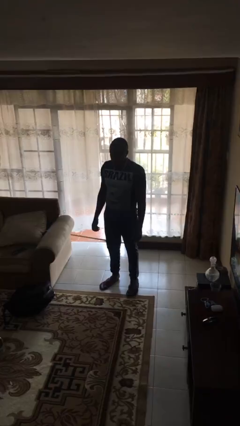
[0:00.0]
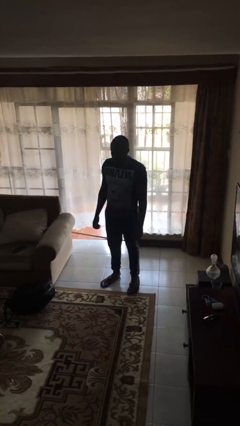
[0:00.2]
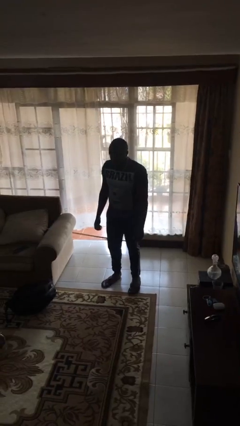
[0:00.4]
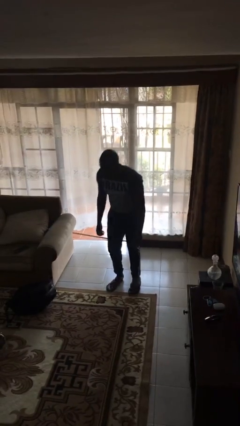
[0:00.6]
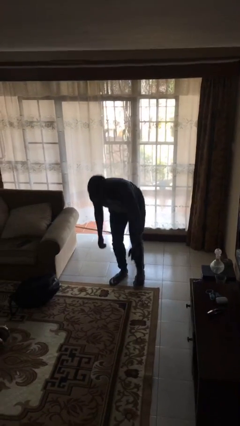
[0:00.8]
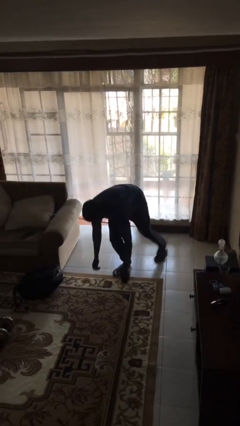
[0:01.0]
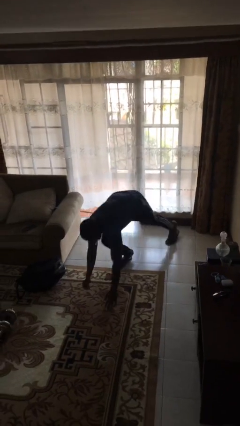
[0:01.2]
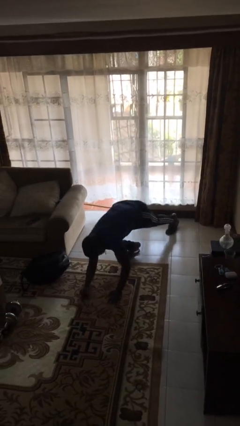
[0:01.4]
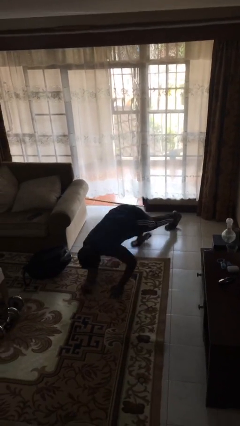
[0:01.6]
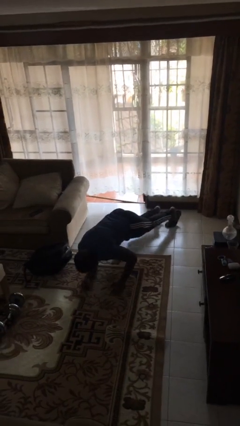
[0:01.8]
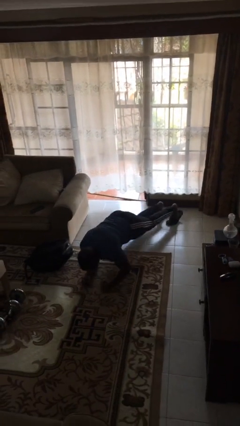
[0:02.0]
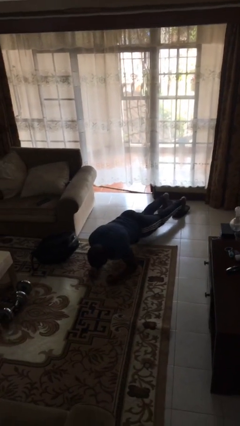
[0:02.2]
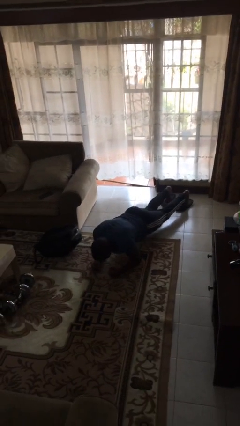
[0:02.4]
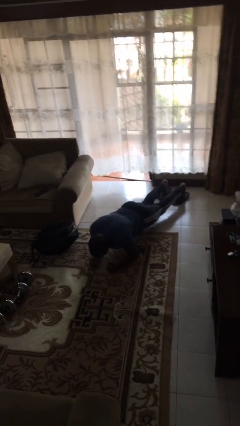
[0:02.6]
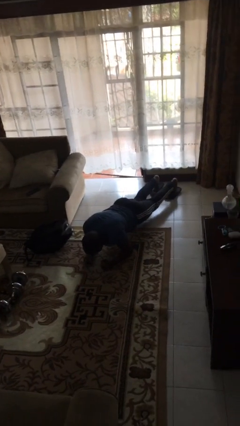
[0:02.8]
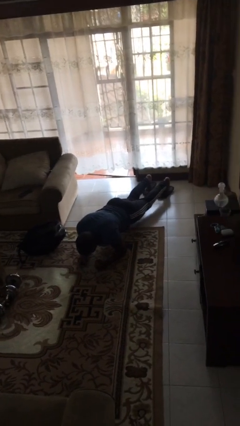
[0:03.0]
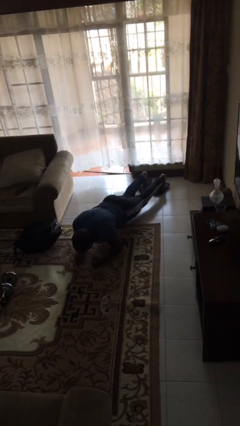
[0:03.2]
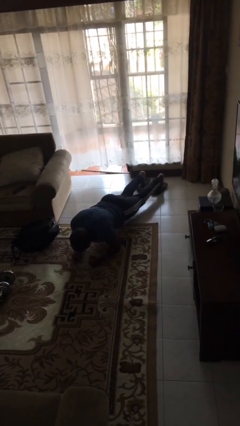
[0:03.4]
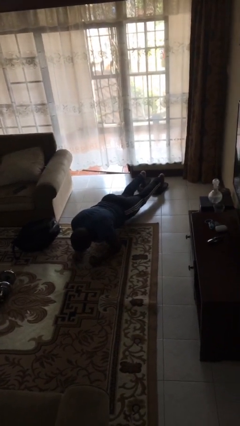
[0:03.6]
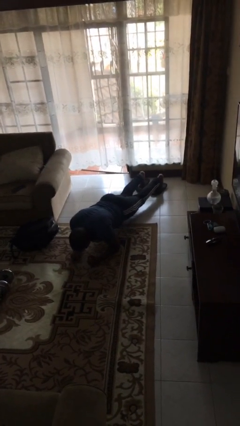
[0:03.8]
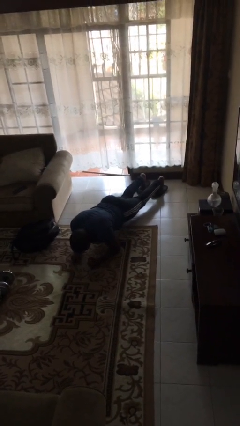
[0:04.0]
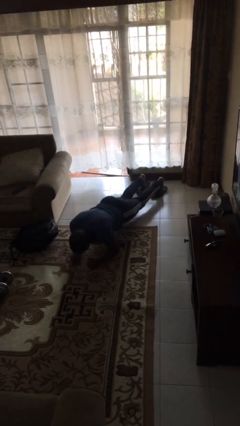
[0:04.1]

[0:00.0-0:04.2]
person exercises with plank

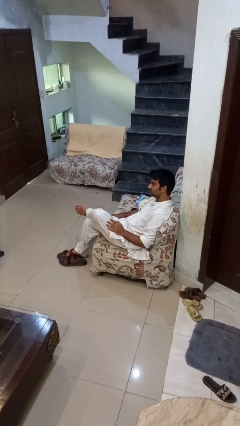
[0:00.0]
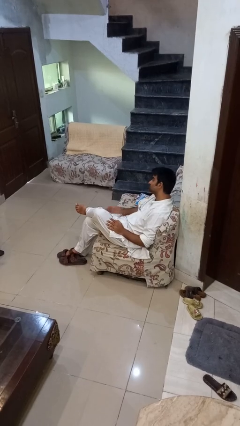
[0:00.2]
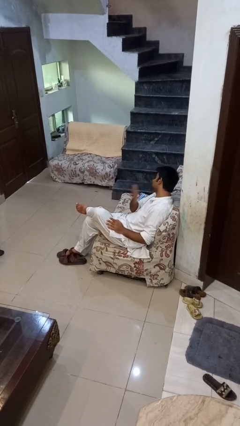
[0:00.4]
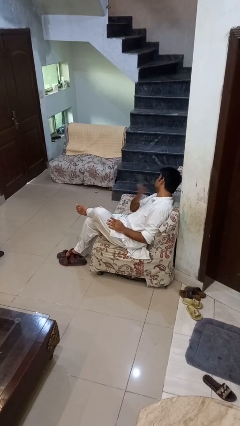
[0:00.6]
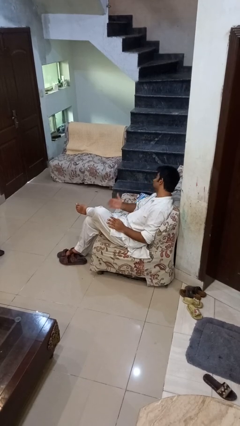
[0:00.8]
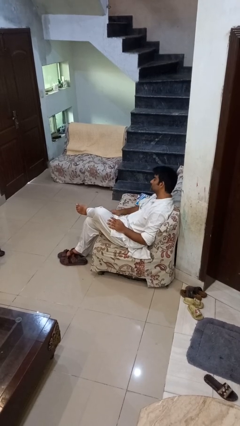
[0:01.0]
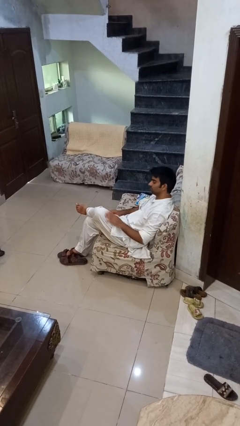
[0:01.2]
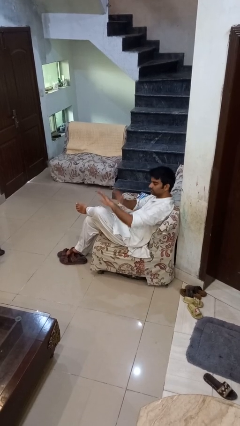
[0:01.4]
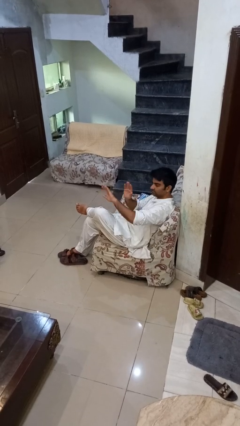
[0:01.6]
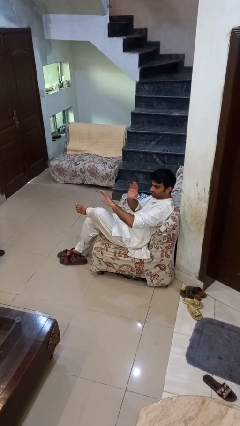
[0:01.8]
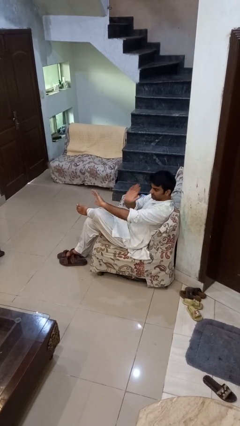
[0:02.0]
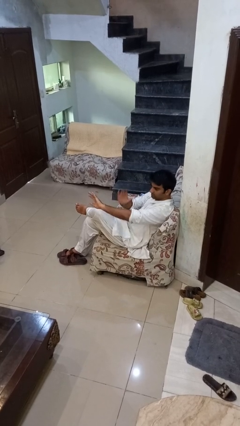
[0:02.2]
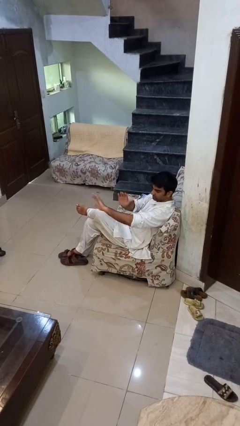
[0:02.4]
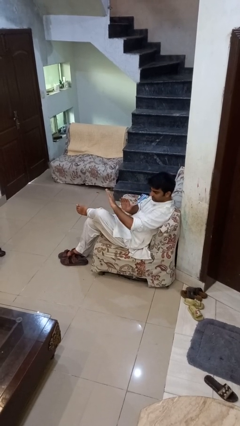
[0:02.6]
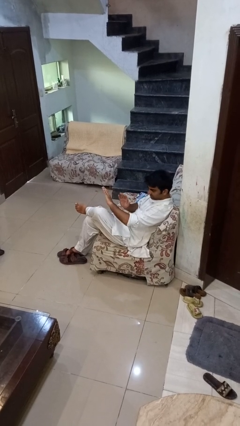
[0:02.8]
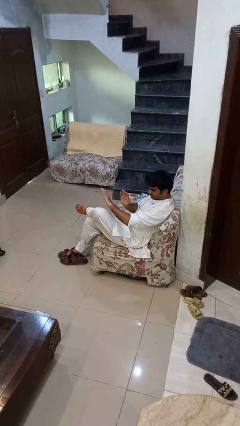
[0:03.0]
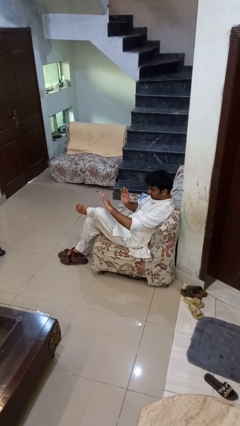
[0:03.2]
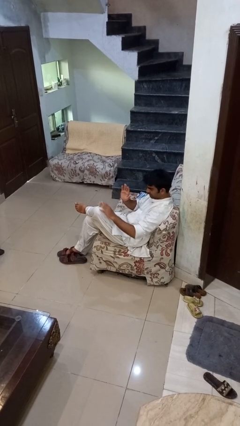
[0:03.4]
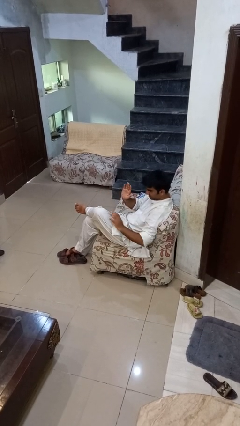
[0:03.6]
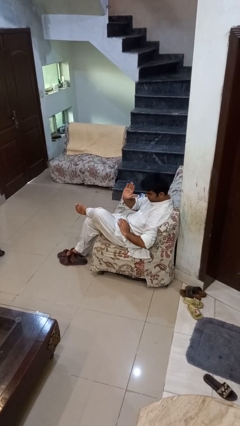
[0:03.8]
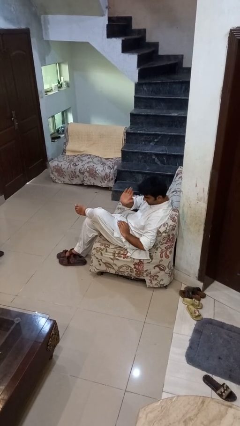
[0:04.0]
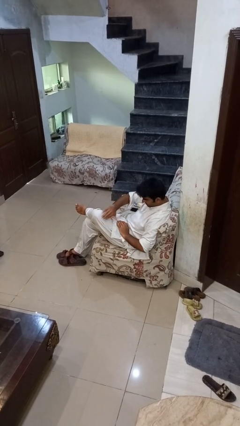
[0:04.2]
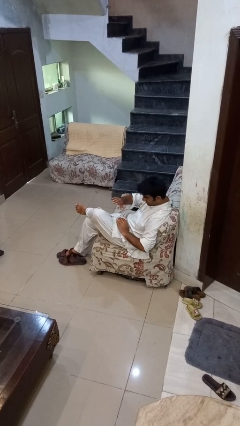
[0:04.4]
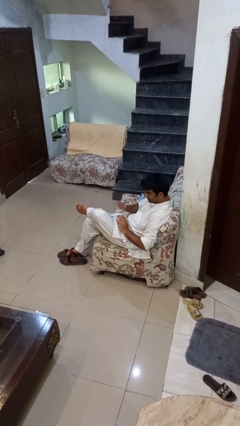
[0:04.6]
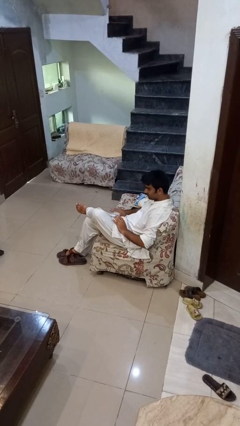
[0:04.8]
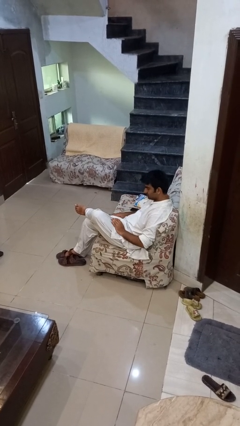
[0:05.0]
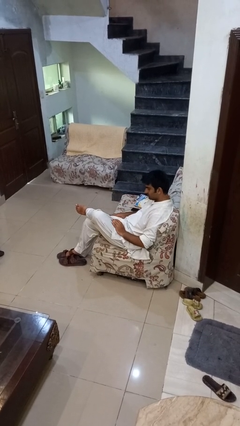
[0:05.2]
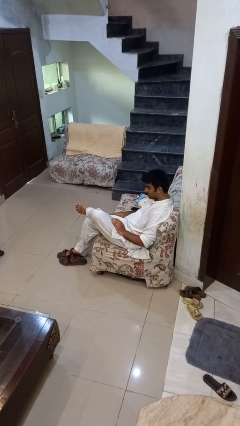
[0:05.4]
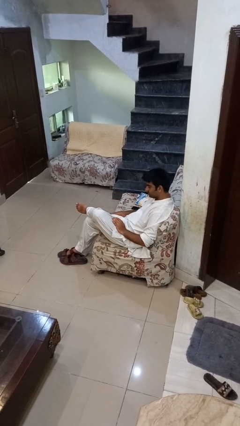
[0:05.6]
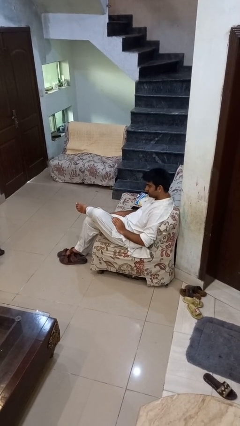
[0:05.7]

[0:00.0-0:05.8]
person swats bug

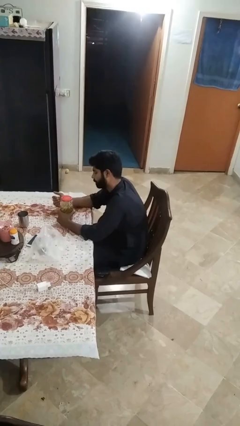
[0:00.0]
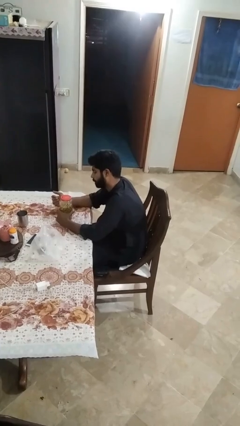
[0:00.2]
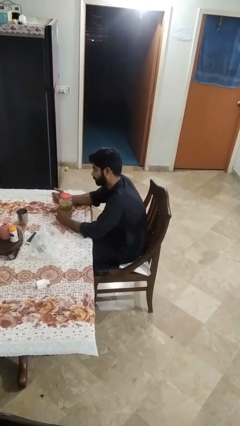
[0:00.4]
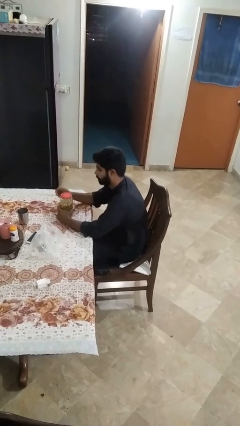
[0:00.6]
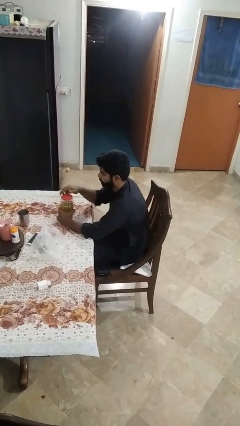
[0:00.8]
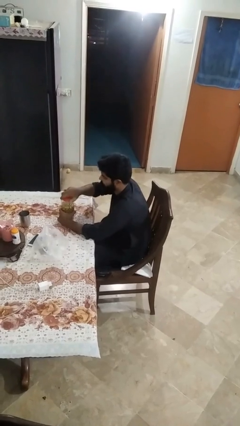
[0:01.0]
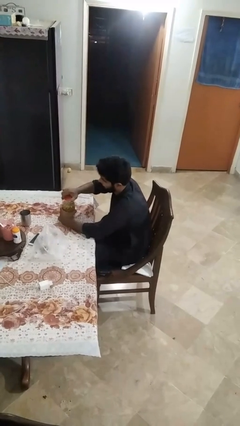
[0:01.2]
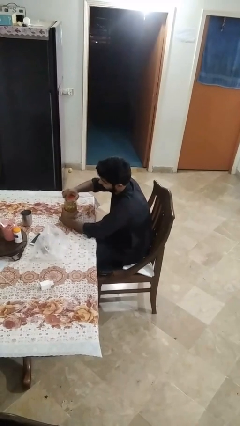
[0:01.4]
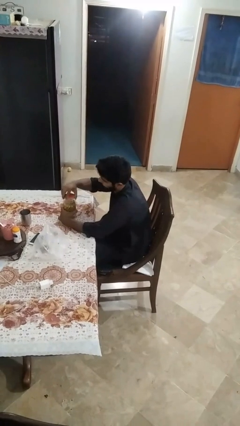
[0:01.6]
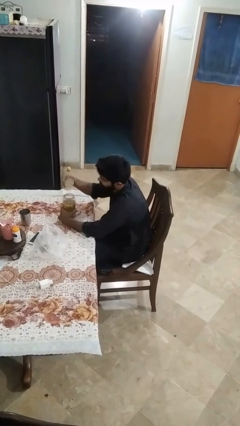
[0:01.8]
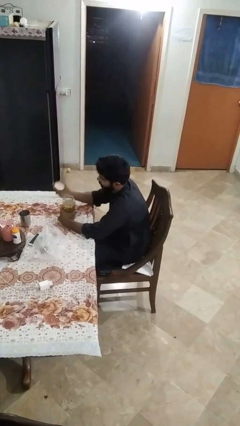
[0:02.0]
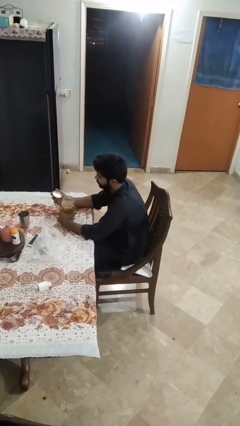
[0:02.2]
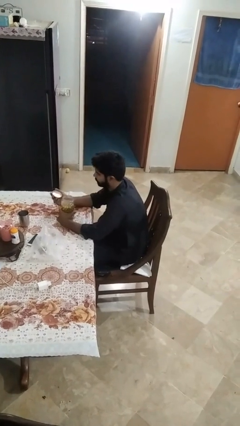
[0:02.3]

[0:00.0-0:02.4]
person opens jar

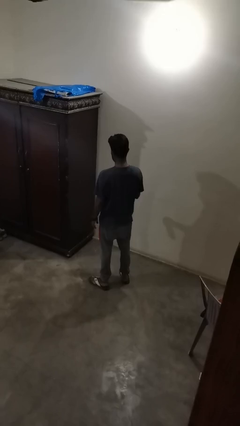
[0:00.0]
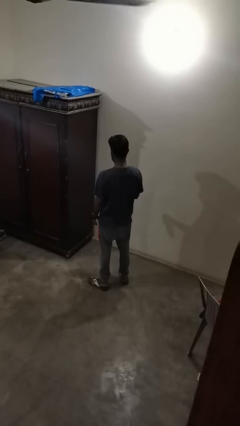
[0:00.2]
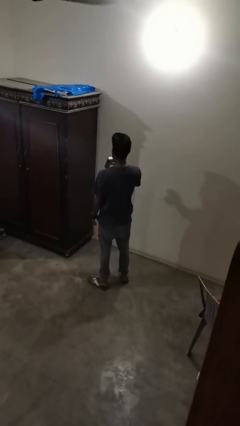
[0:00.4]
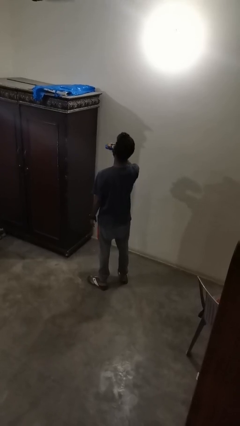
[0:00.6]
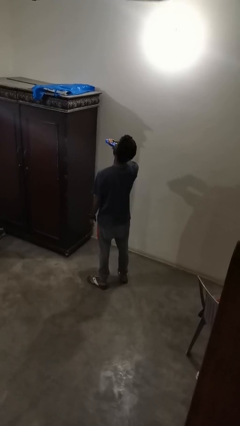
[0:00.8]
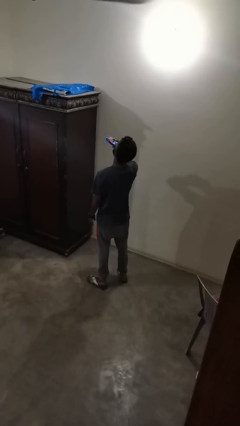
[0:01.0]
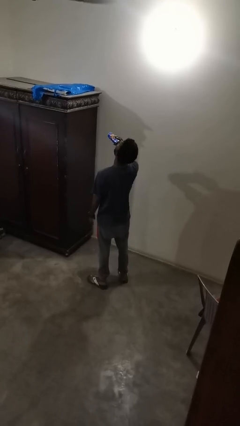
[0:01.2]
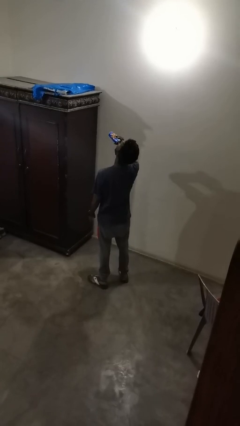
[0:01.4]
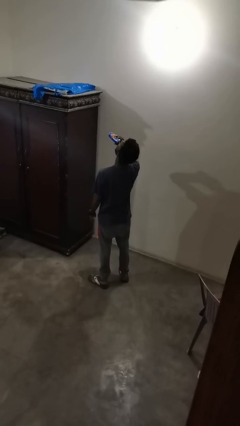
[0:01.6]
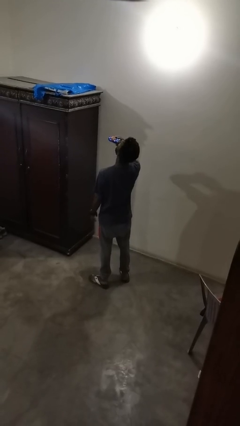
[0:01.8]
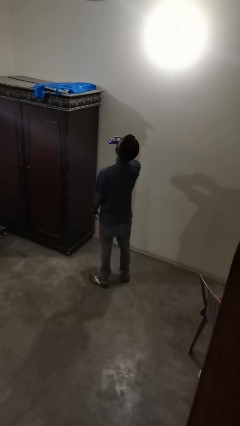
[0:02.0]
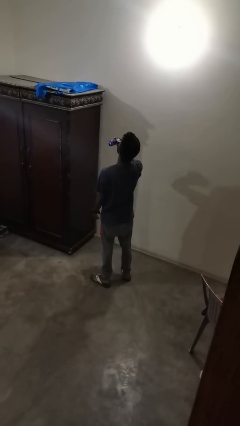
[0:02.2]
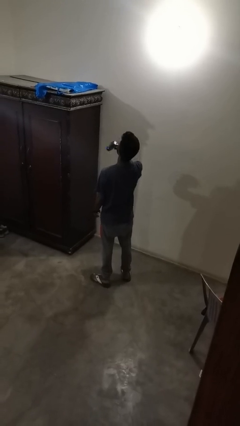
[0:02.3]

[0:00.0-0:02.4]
person drinks from beverage can

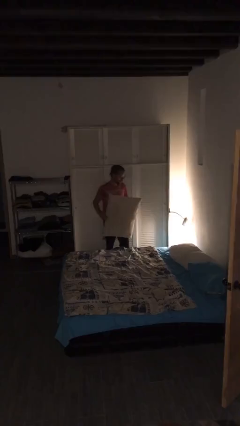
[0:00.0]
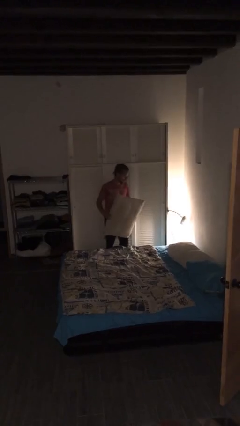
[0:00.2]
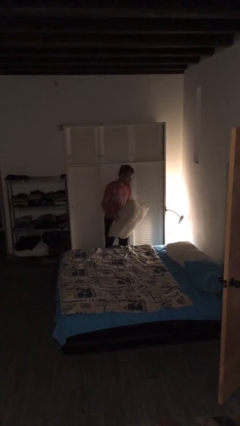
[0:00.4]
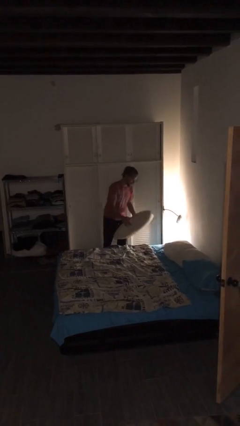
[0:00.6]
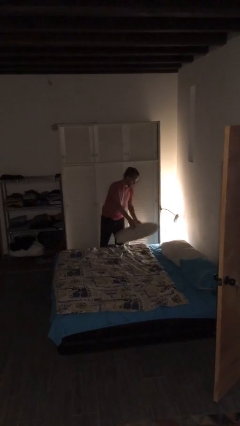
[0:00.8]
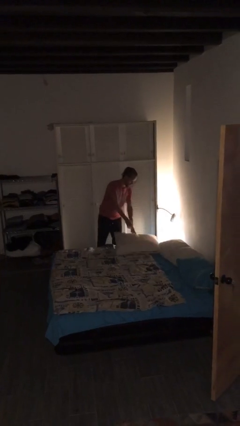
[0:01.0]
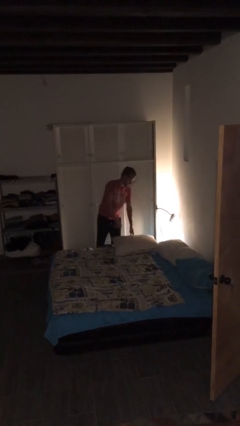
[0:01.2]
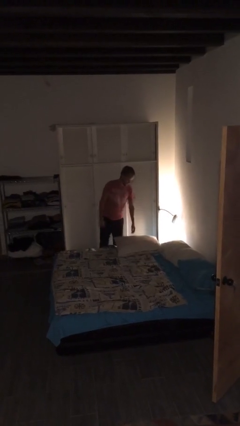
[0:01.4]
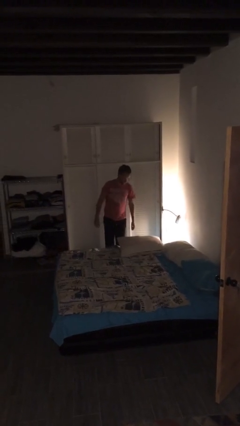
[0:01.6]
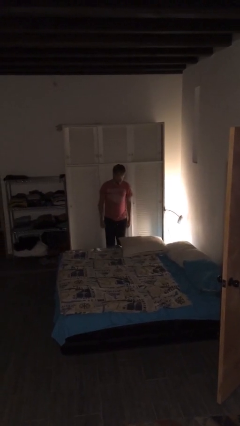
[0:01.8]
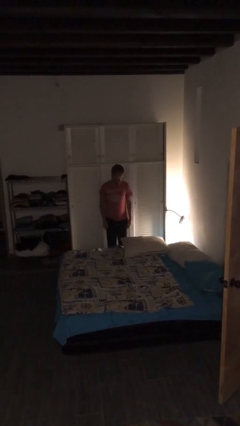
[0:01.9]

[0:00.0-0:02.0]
person puts down object on bed

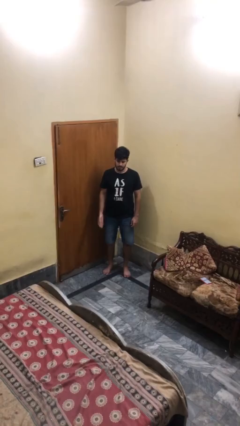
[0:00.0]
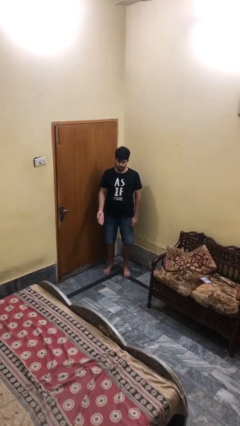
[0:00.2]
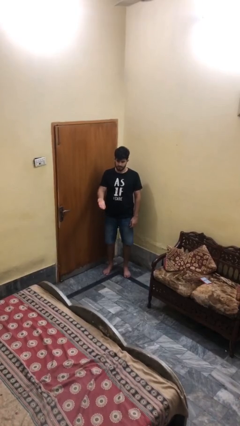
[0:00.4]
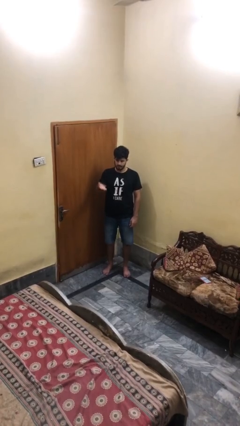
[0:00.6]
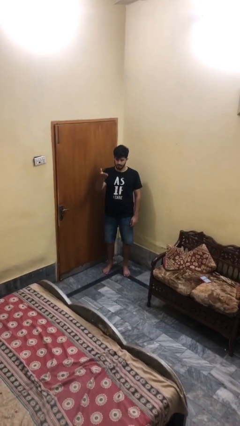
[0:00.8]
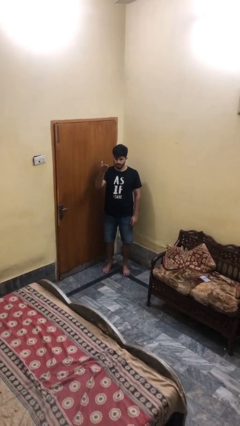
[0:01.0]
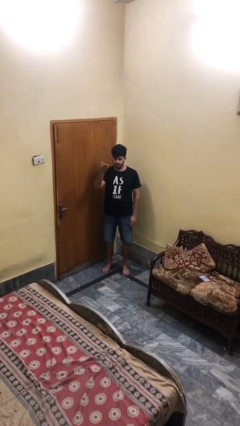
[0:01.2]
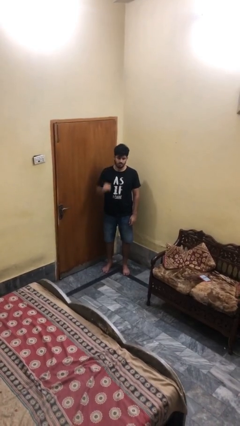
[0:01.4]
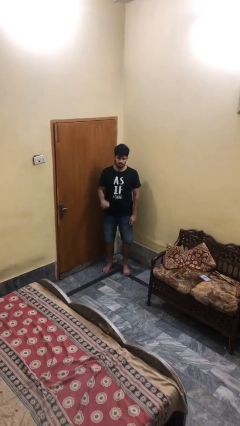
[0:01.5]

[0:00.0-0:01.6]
person gestures swipe up
